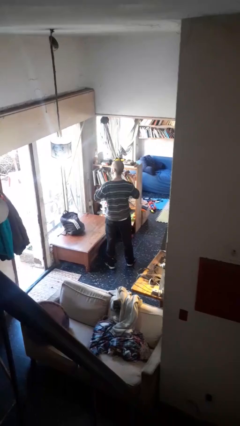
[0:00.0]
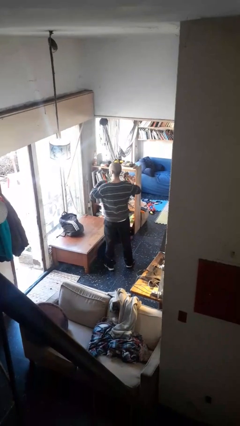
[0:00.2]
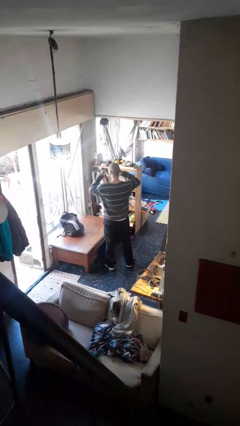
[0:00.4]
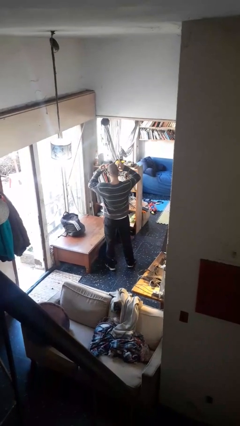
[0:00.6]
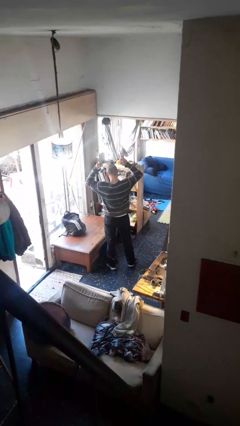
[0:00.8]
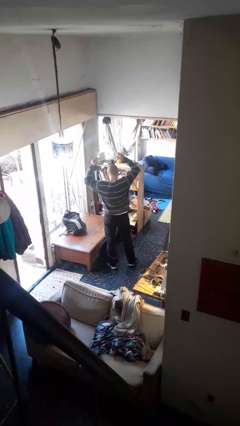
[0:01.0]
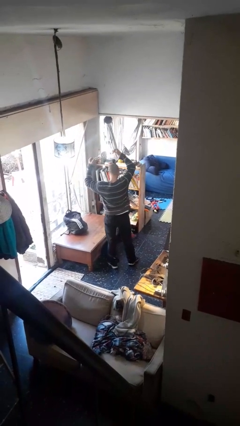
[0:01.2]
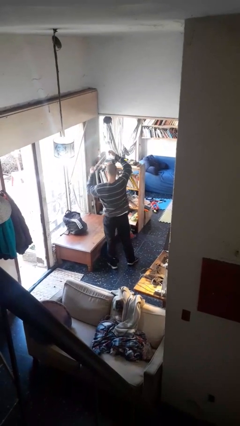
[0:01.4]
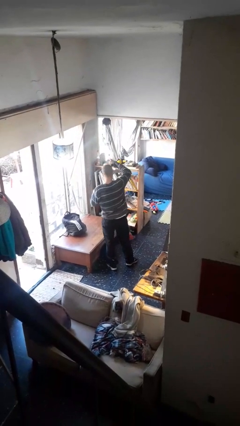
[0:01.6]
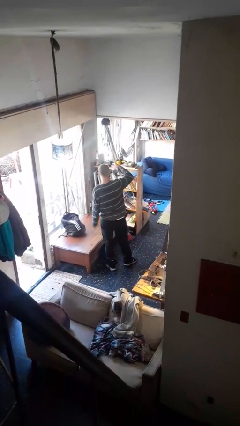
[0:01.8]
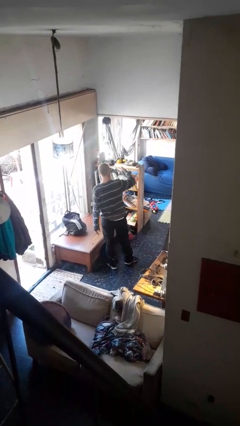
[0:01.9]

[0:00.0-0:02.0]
person takes off necklace

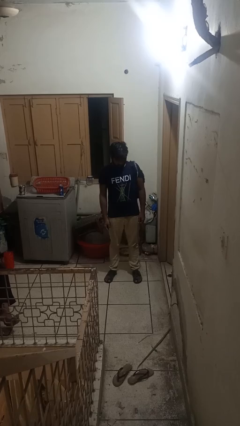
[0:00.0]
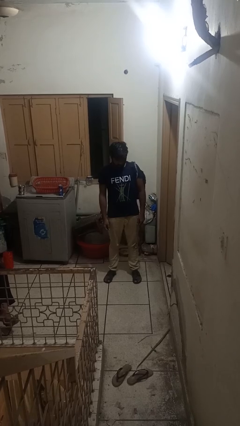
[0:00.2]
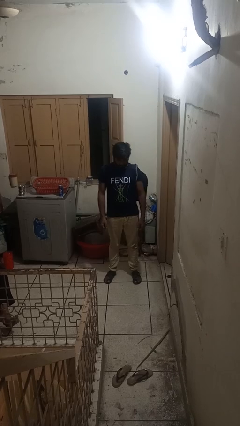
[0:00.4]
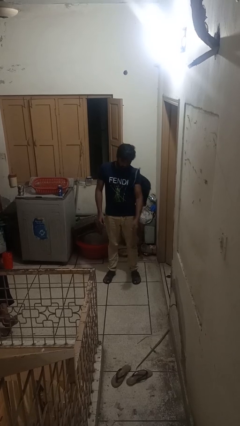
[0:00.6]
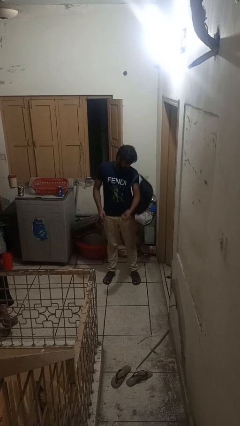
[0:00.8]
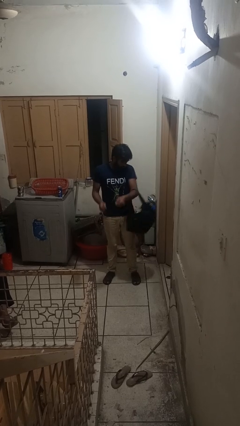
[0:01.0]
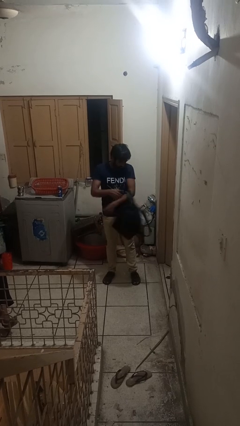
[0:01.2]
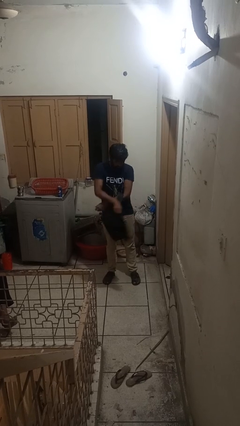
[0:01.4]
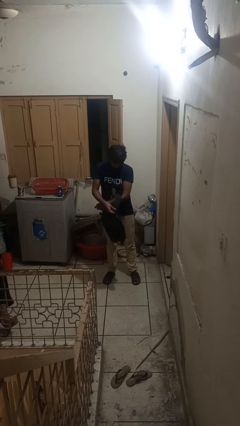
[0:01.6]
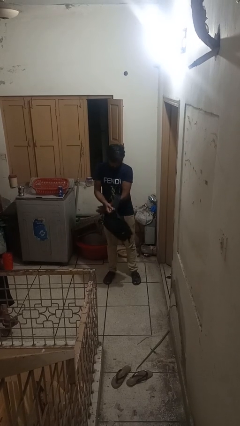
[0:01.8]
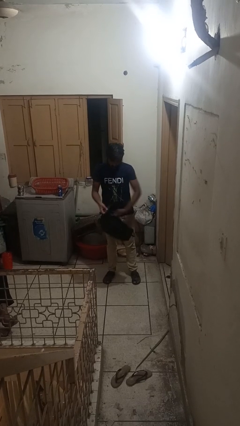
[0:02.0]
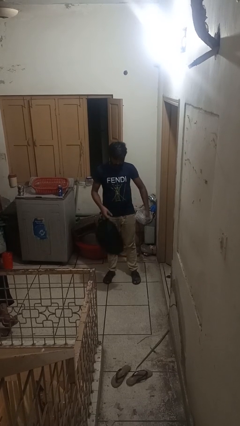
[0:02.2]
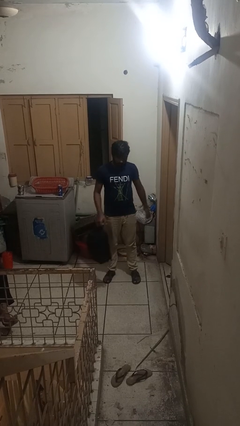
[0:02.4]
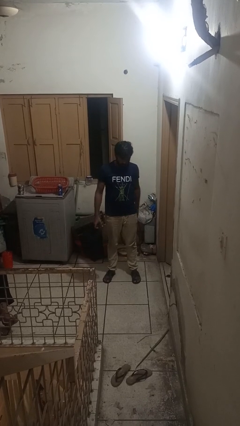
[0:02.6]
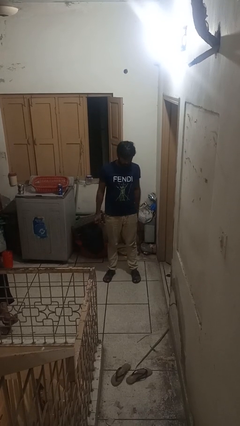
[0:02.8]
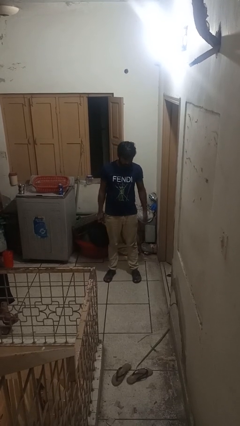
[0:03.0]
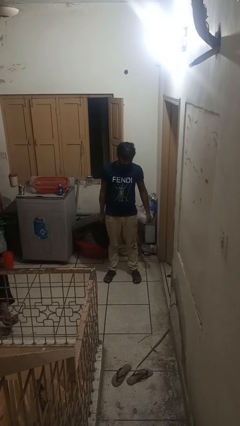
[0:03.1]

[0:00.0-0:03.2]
person takes off backpack

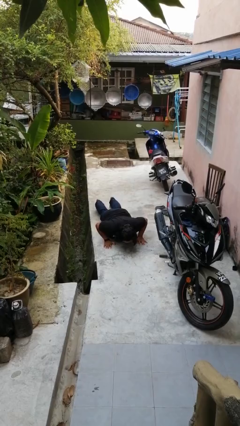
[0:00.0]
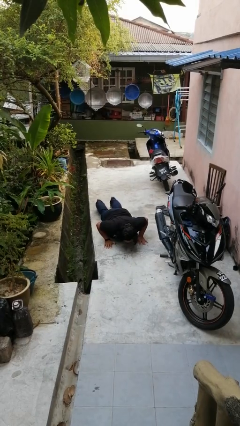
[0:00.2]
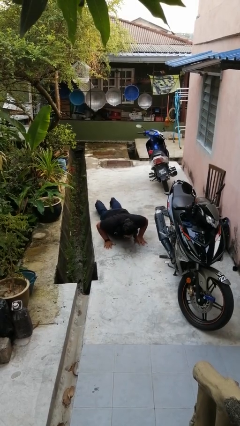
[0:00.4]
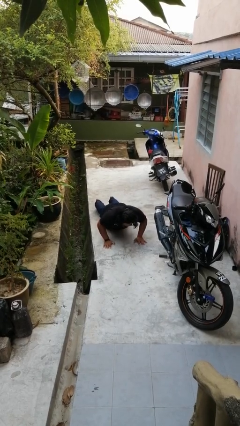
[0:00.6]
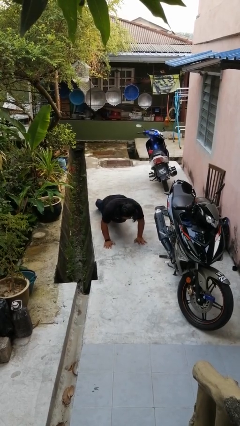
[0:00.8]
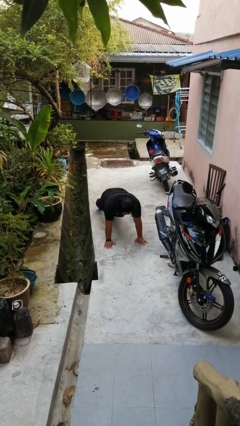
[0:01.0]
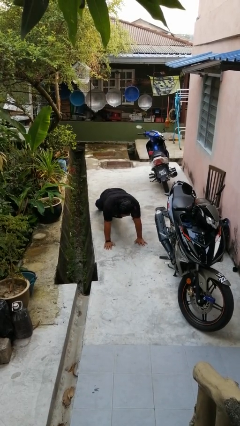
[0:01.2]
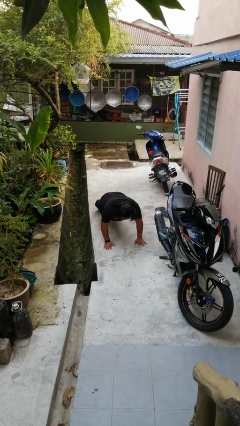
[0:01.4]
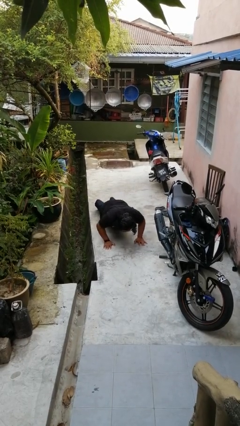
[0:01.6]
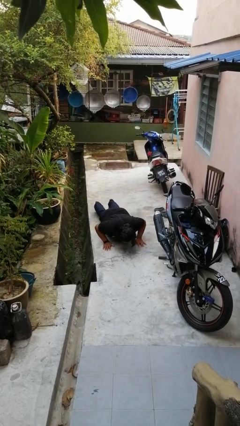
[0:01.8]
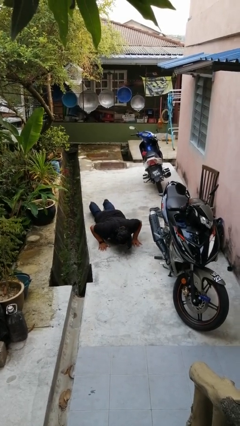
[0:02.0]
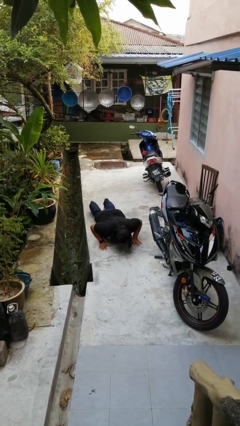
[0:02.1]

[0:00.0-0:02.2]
person exercises with pushup

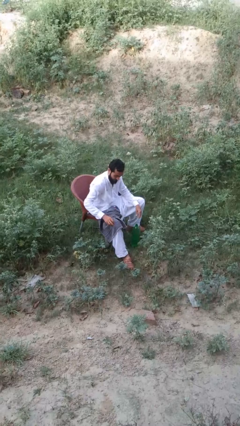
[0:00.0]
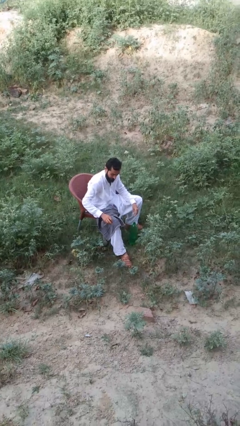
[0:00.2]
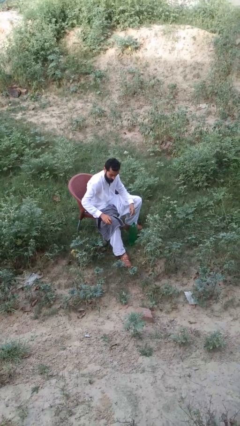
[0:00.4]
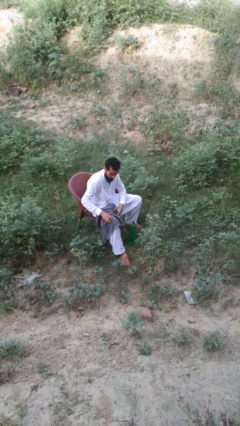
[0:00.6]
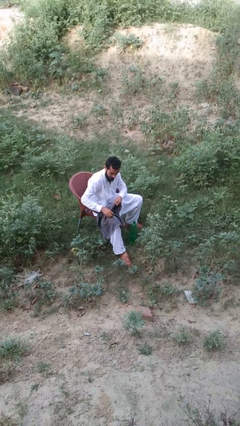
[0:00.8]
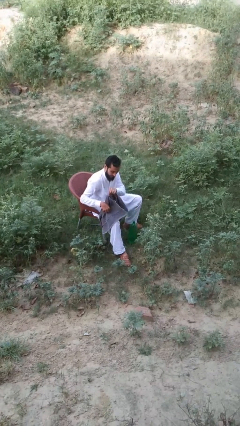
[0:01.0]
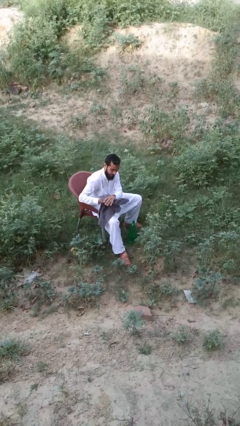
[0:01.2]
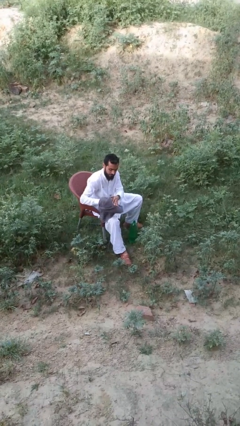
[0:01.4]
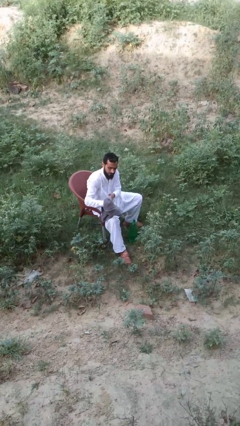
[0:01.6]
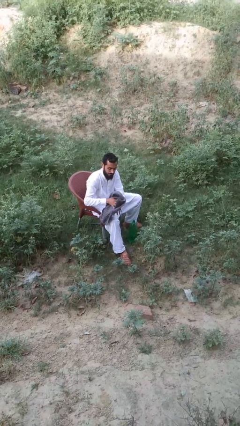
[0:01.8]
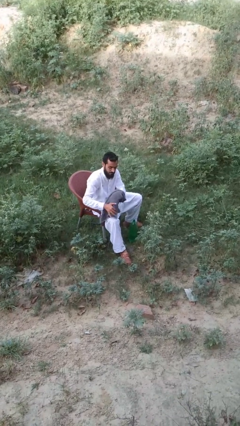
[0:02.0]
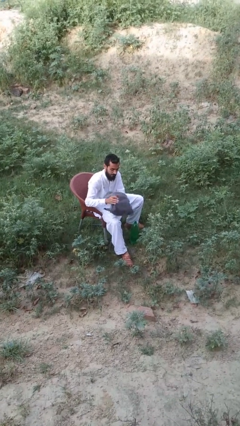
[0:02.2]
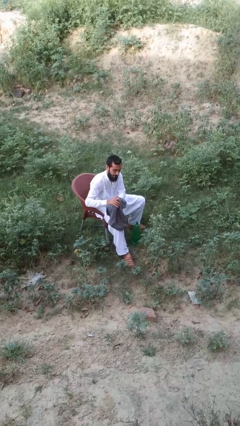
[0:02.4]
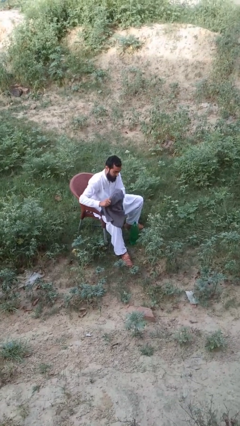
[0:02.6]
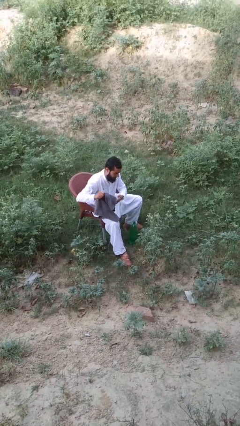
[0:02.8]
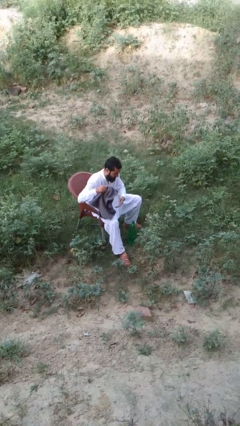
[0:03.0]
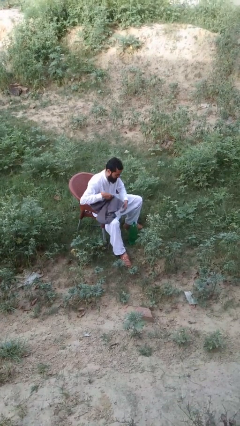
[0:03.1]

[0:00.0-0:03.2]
person dries hands with towel

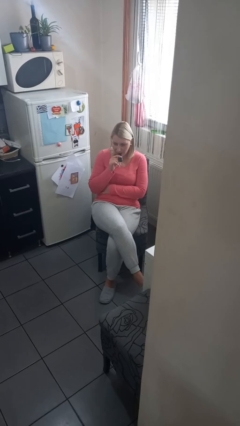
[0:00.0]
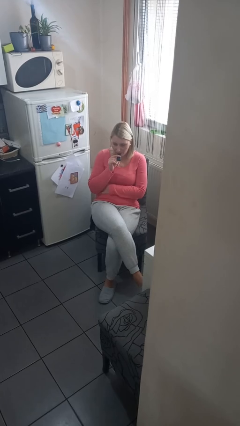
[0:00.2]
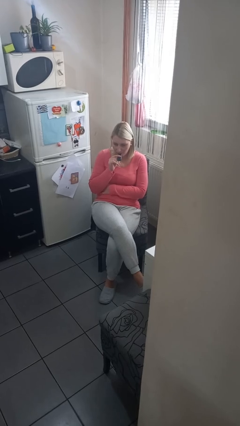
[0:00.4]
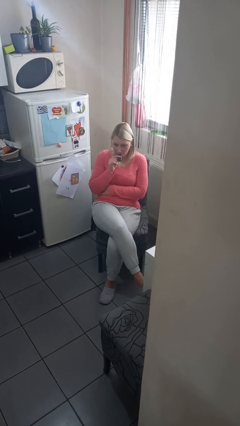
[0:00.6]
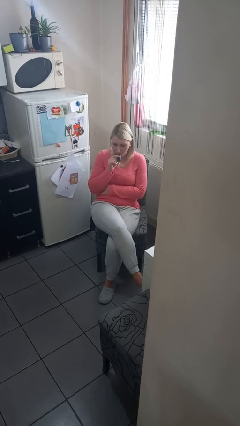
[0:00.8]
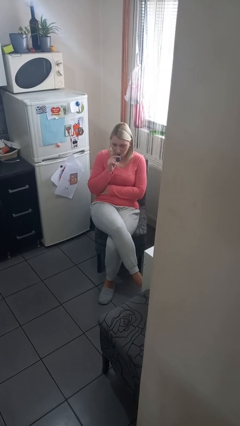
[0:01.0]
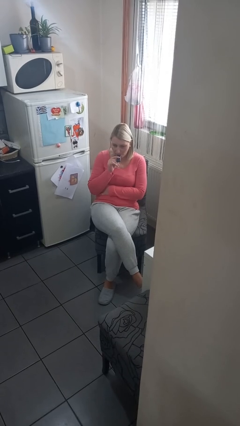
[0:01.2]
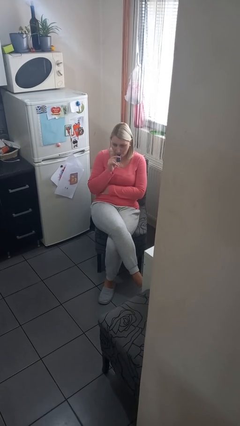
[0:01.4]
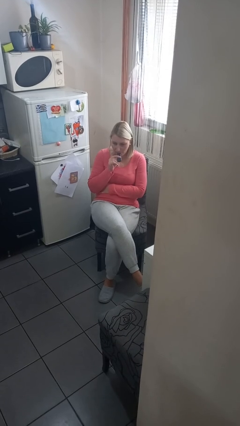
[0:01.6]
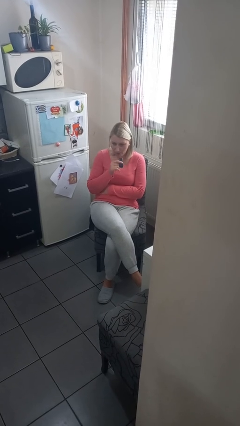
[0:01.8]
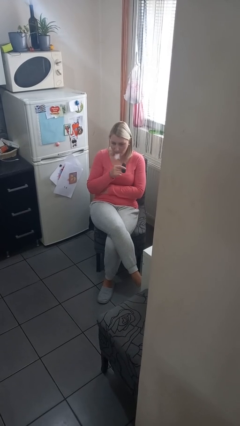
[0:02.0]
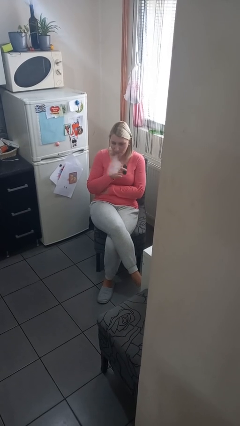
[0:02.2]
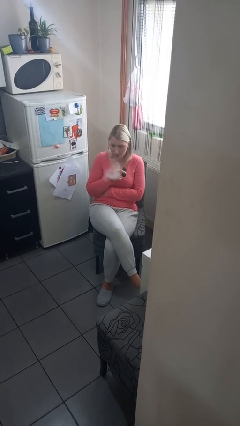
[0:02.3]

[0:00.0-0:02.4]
person vapes

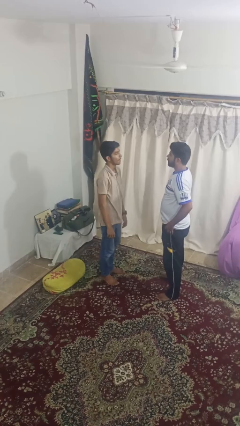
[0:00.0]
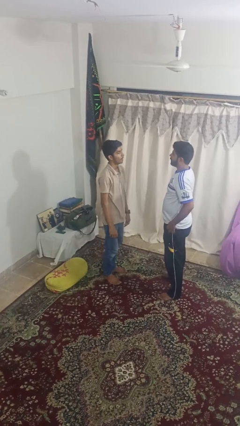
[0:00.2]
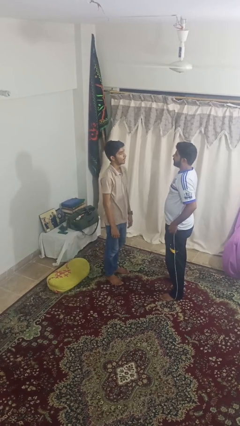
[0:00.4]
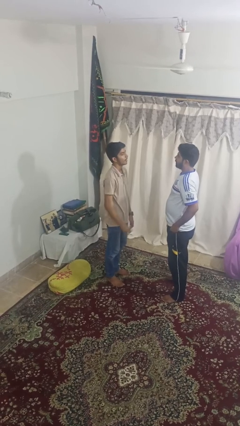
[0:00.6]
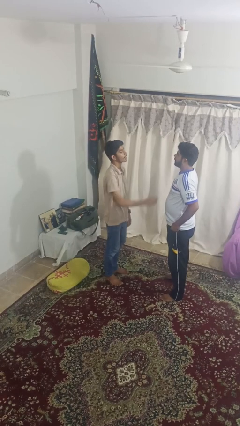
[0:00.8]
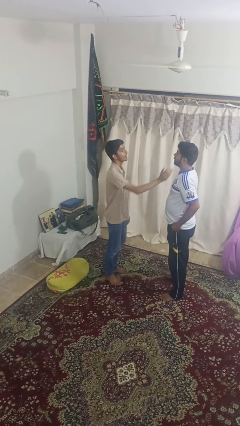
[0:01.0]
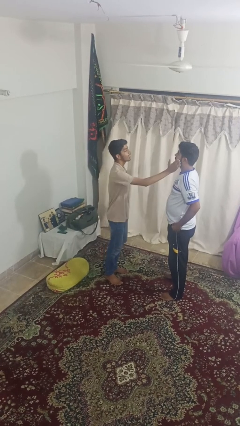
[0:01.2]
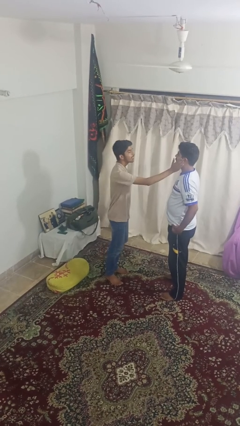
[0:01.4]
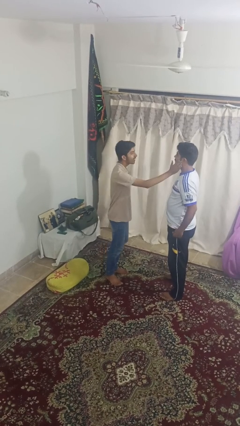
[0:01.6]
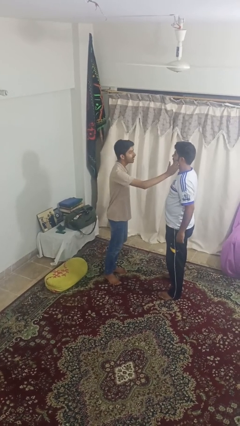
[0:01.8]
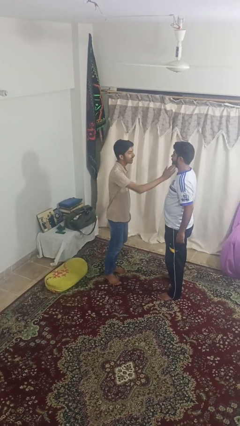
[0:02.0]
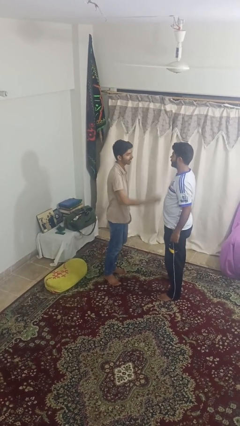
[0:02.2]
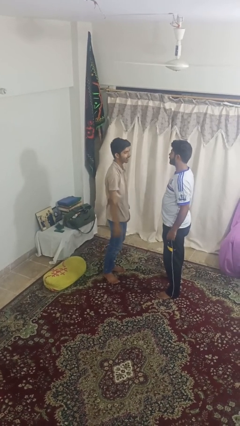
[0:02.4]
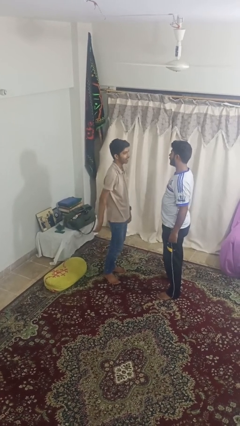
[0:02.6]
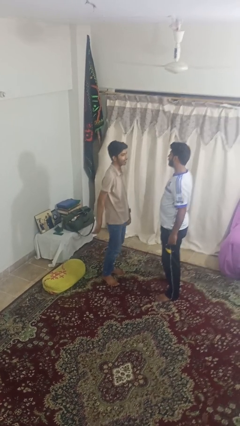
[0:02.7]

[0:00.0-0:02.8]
person touches face of person

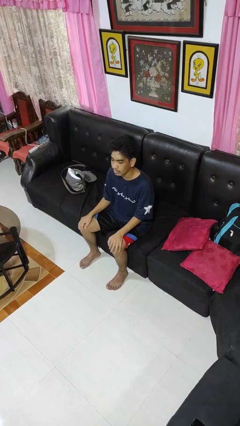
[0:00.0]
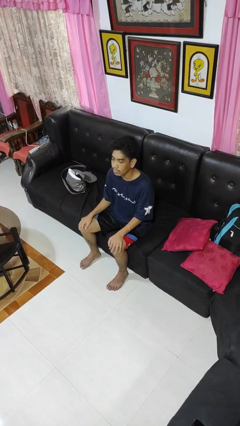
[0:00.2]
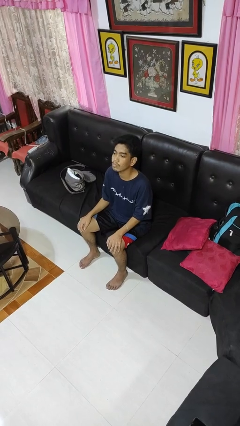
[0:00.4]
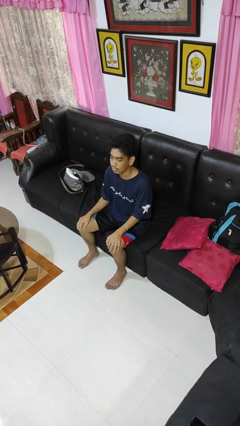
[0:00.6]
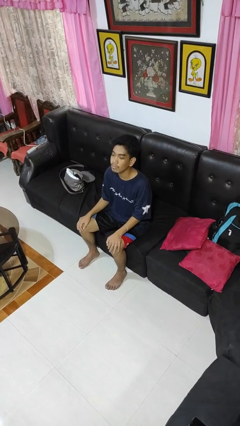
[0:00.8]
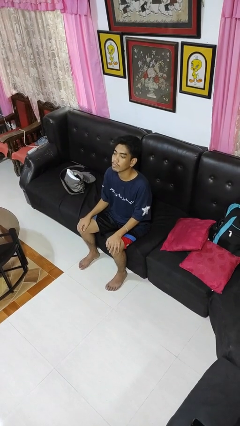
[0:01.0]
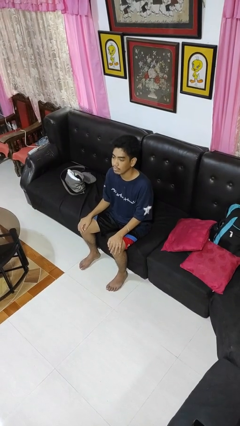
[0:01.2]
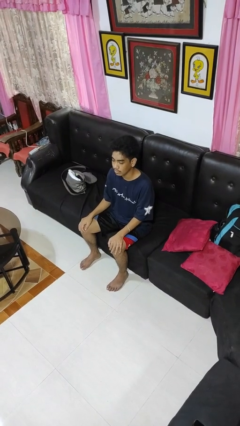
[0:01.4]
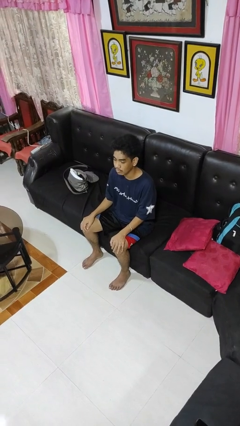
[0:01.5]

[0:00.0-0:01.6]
person nods head
